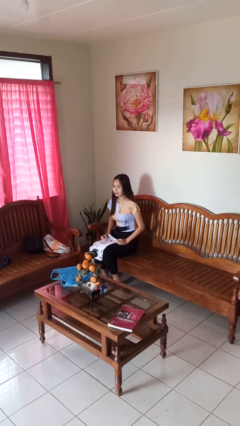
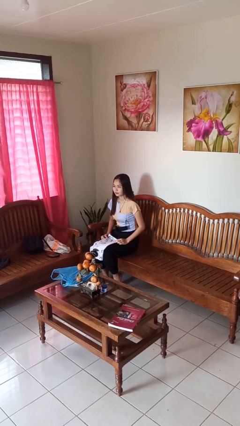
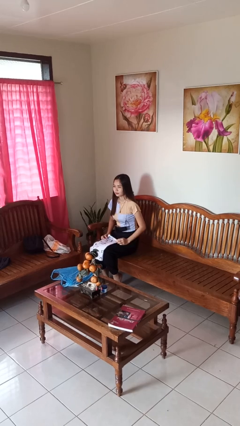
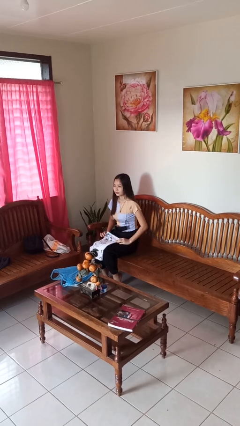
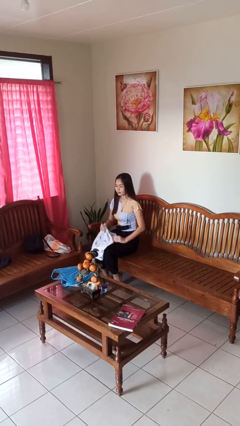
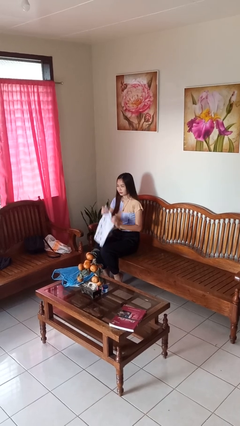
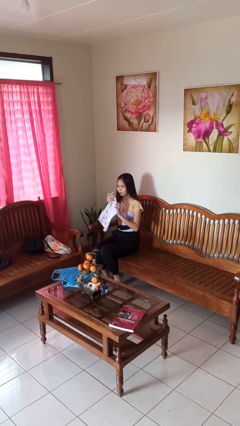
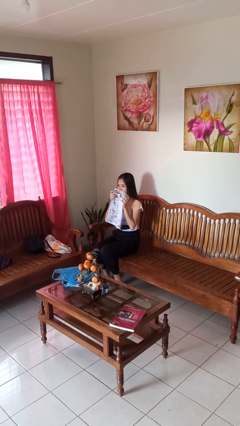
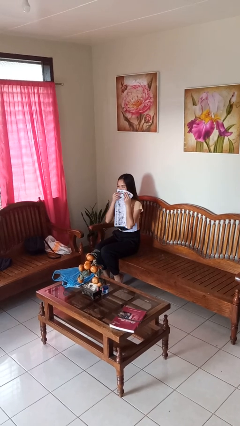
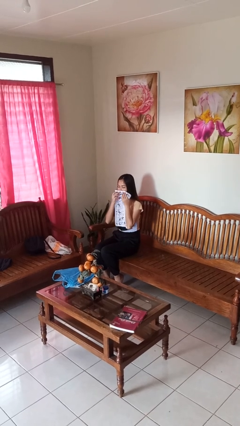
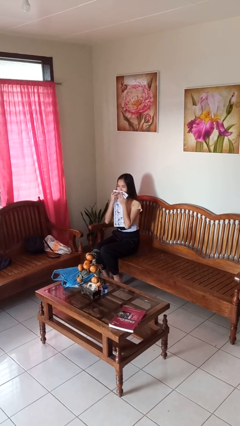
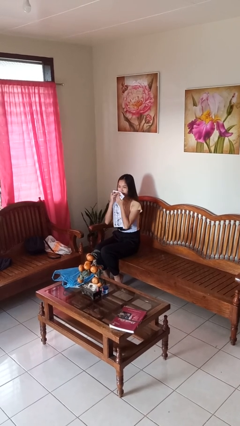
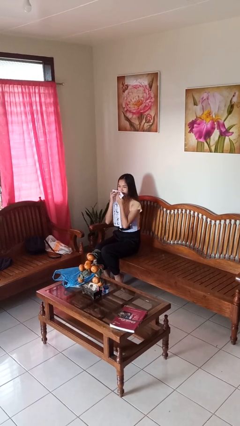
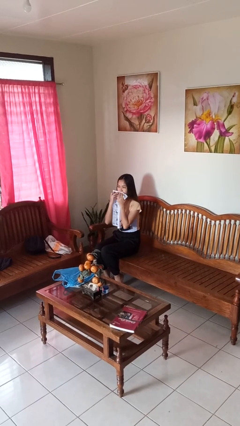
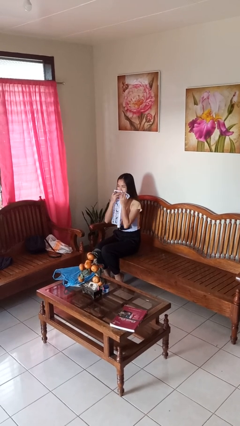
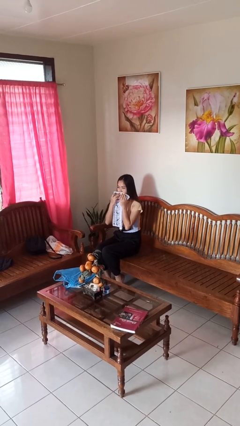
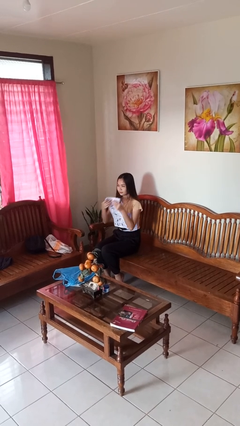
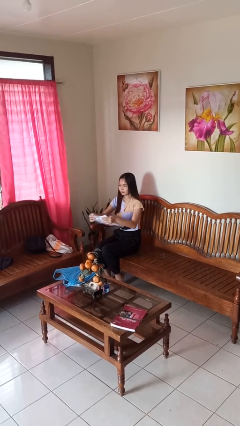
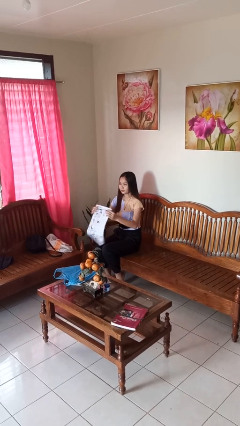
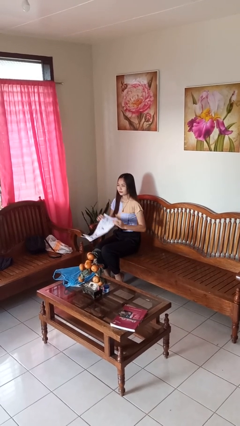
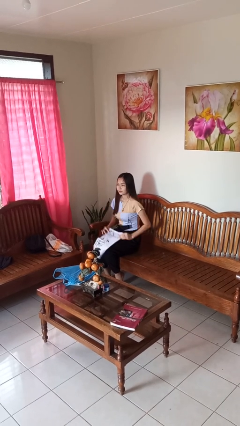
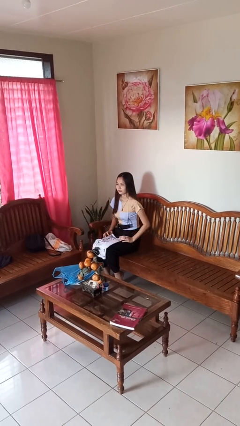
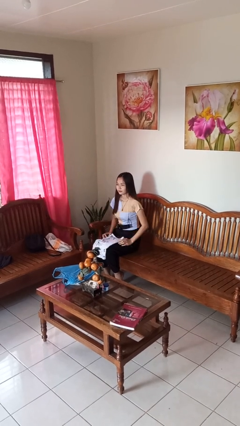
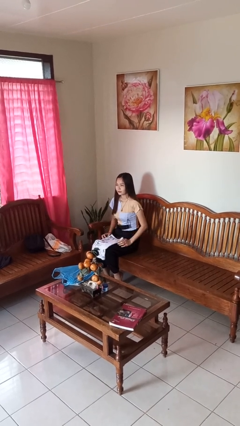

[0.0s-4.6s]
person wipes mouth with napkin

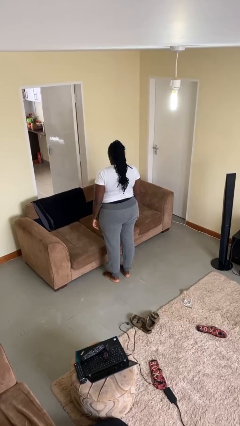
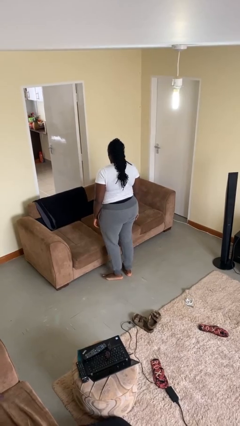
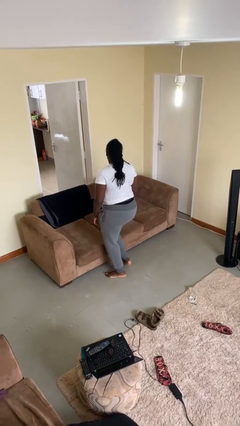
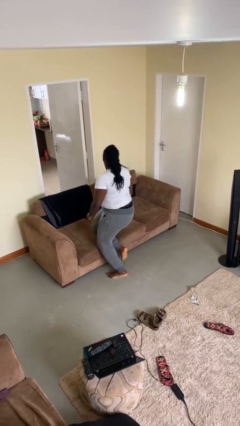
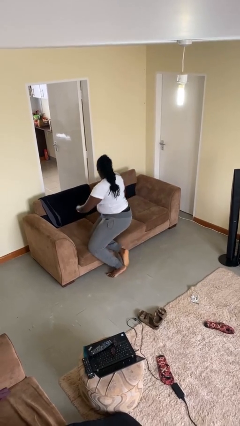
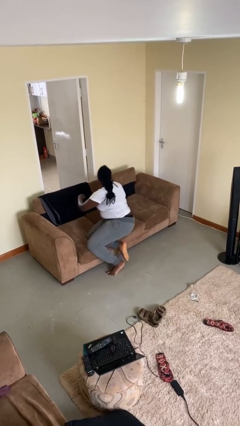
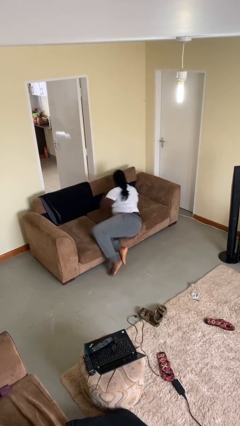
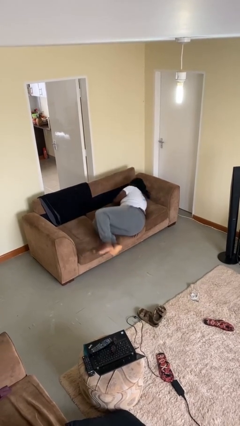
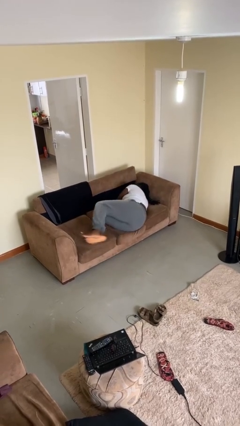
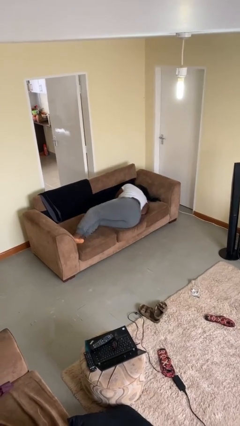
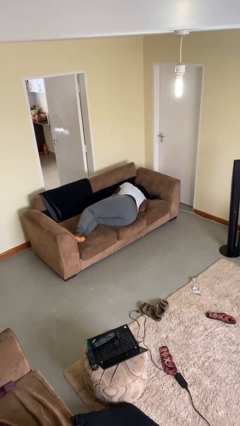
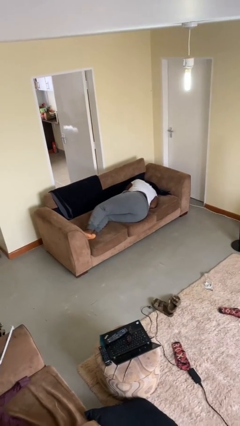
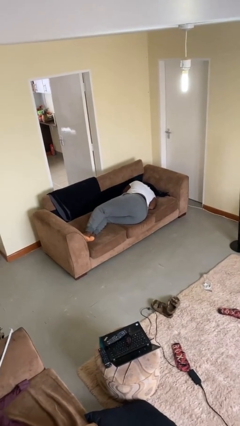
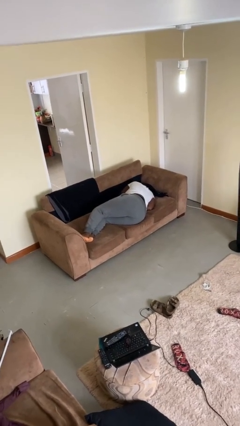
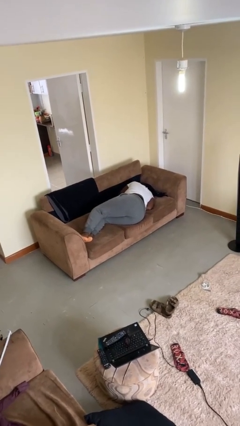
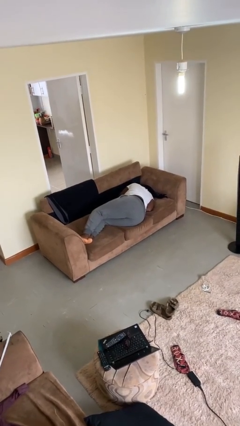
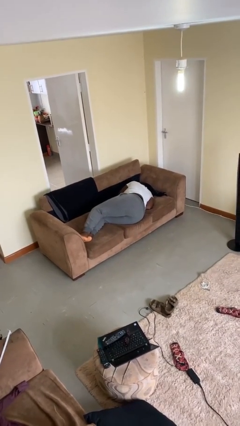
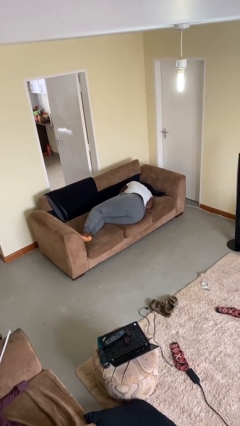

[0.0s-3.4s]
person lies down on couch

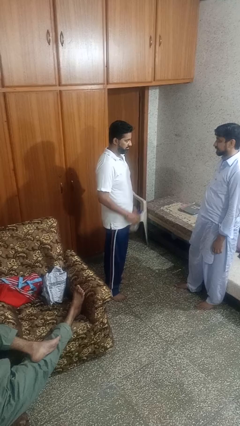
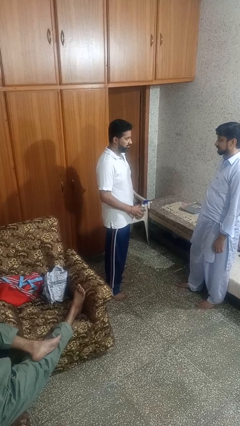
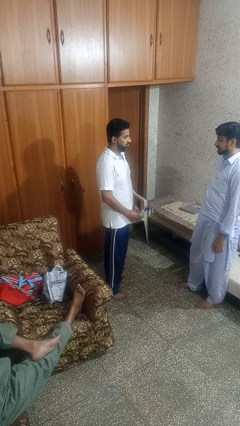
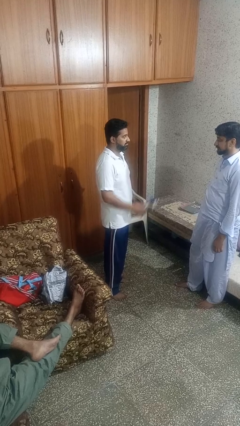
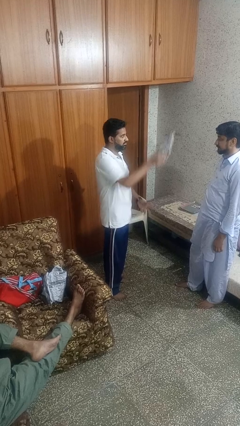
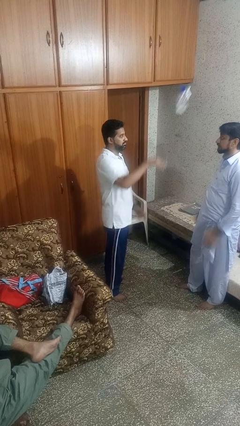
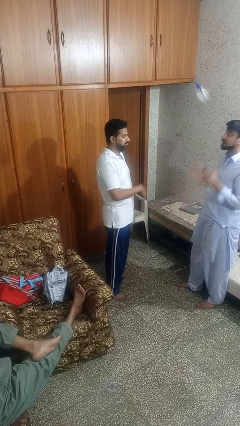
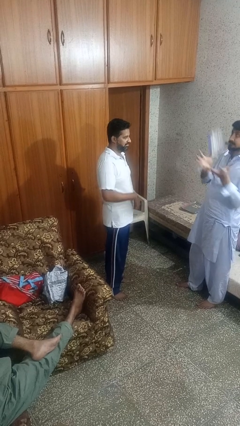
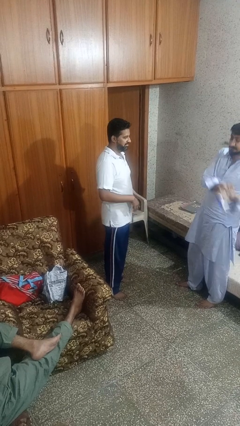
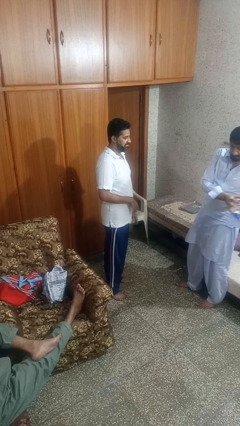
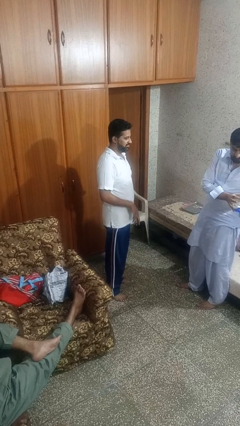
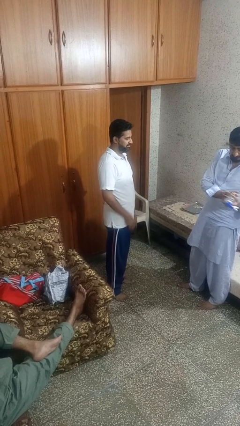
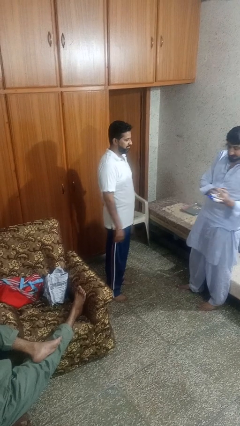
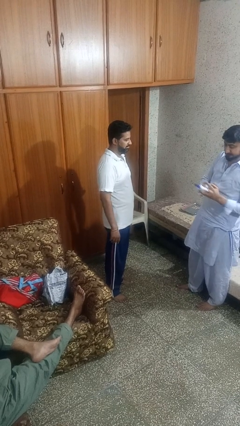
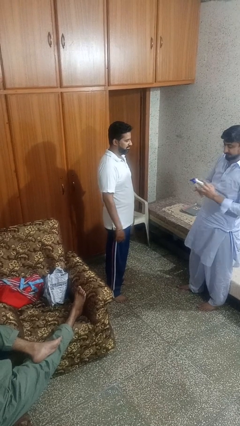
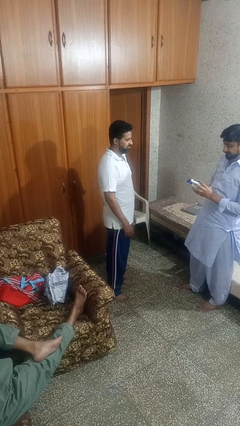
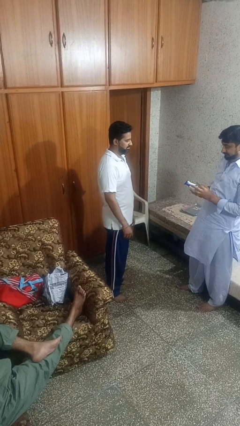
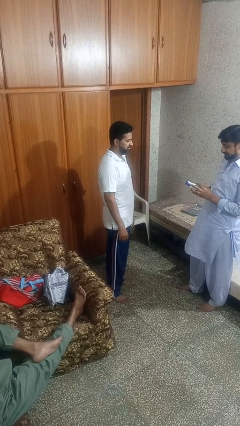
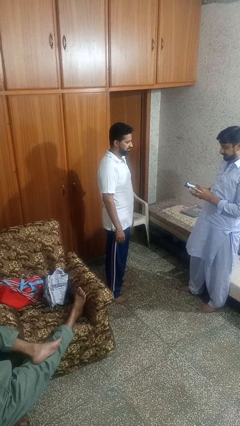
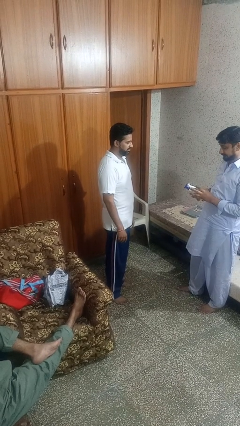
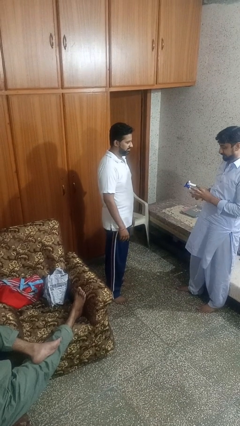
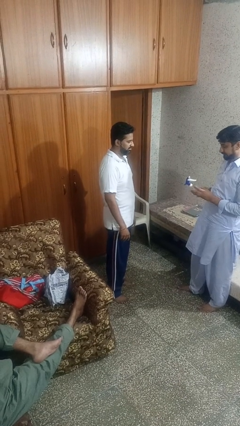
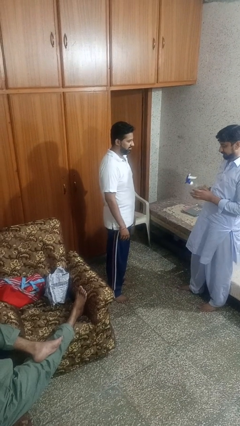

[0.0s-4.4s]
person throws object to person

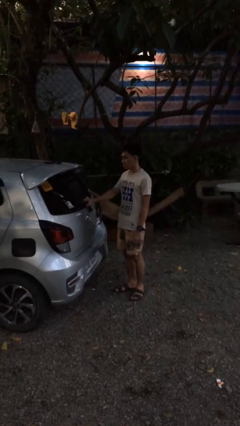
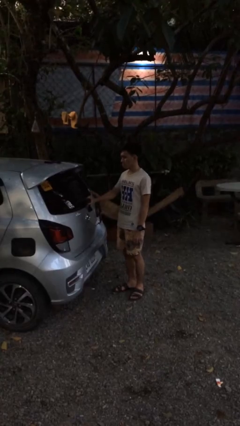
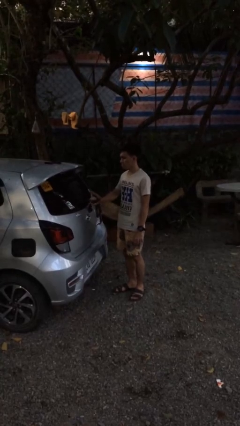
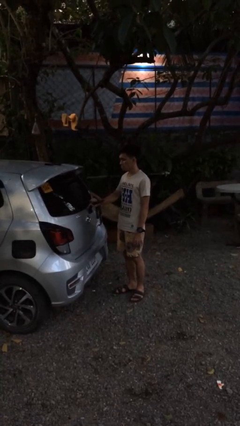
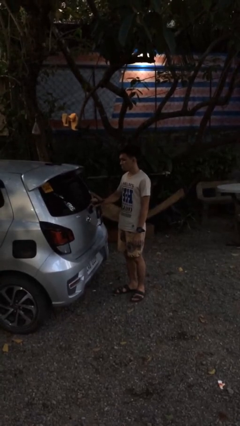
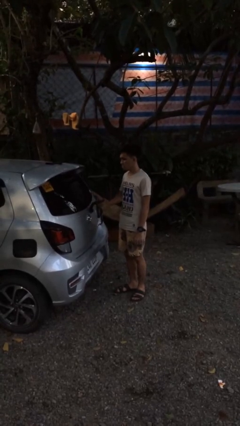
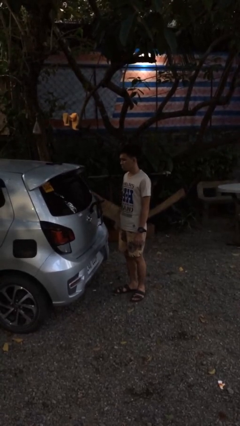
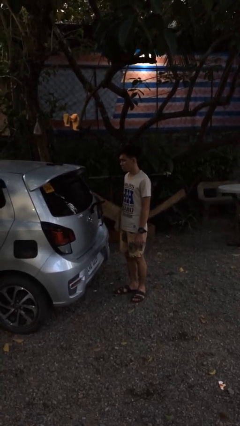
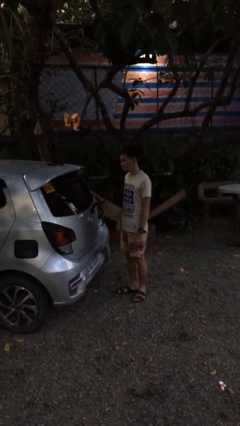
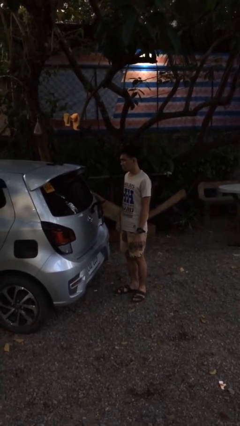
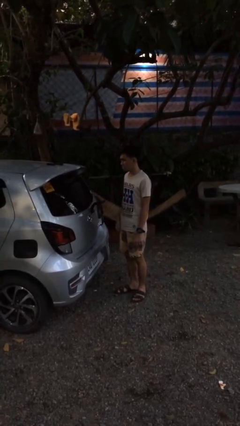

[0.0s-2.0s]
person flips up car wipers

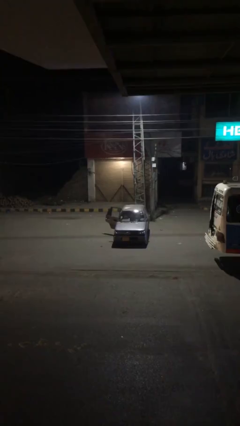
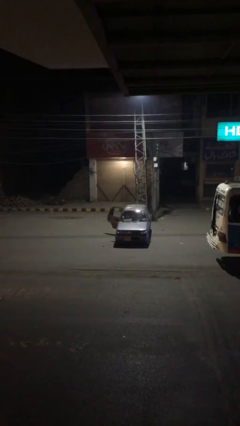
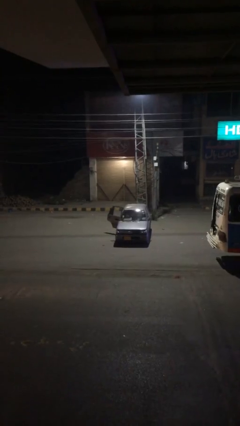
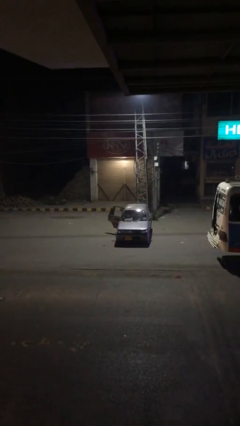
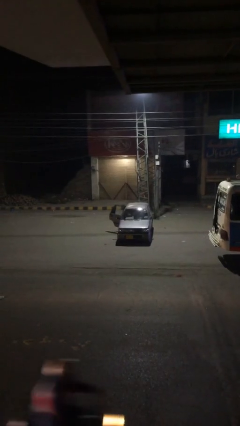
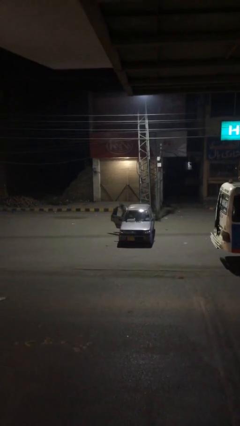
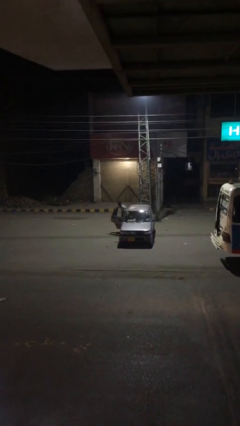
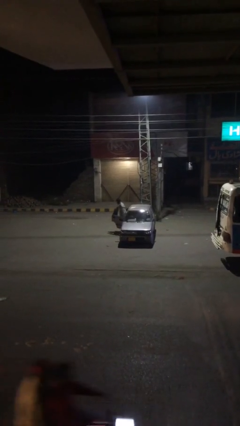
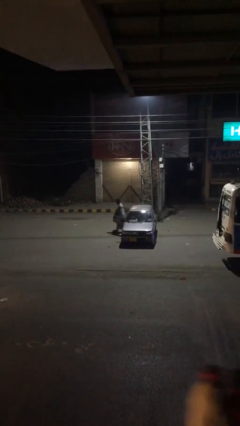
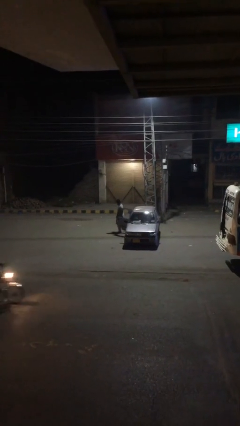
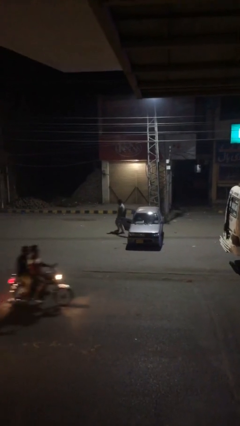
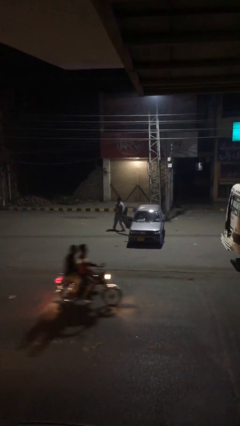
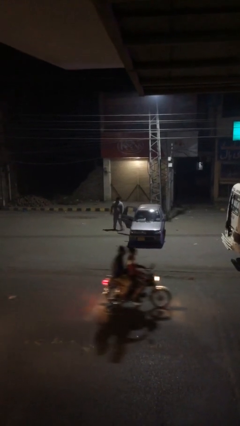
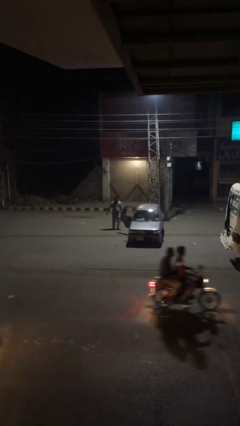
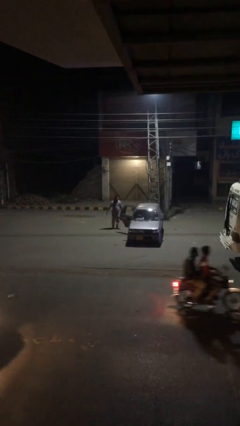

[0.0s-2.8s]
person exits car

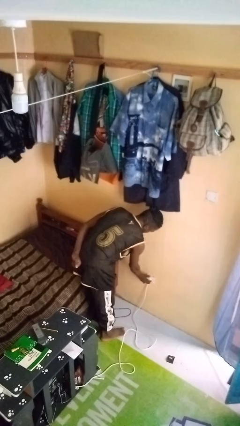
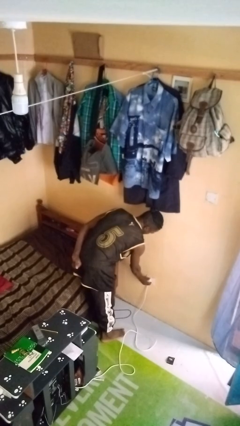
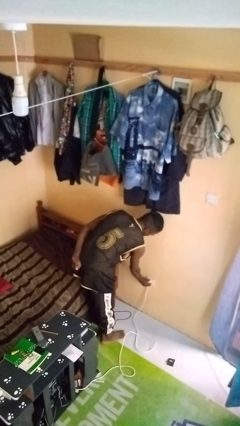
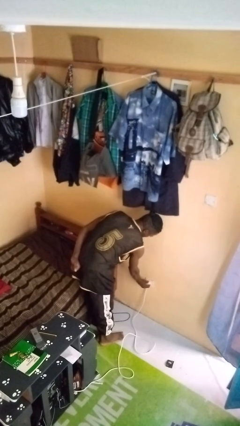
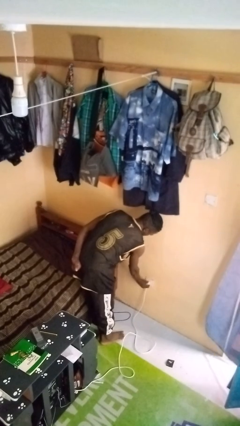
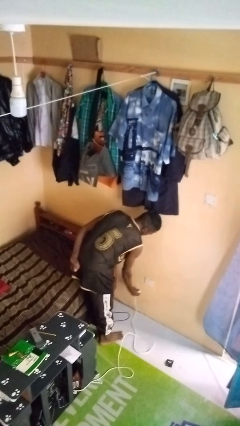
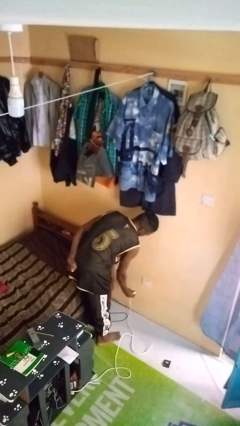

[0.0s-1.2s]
person unplugs from electrical socket
